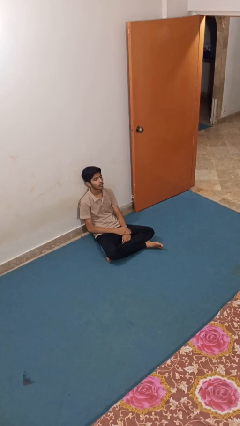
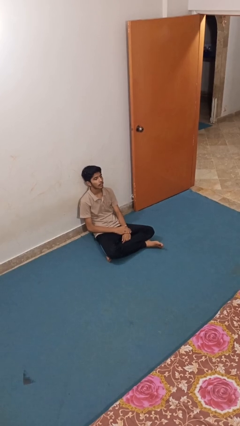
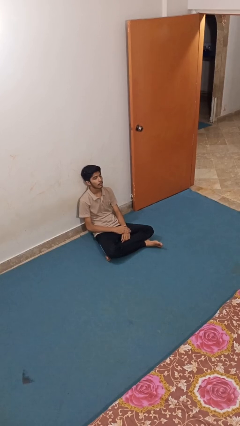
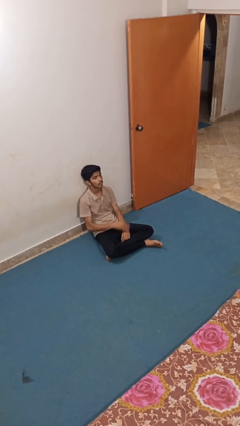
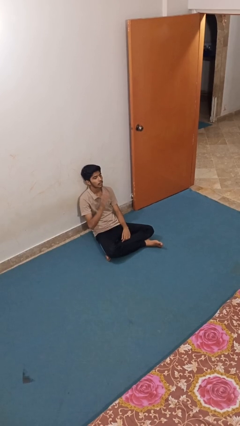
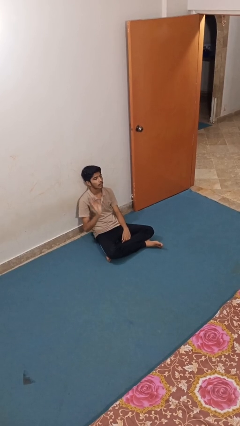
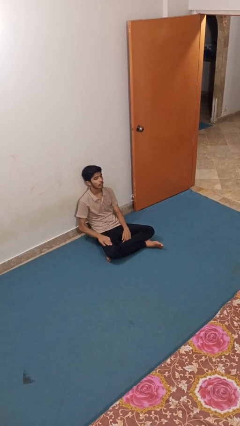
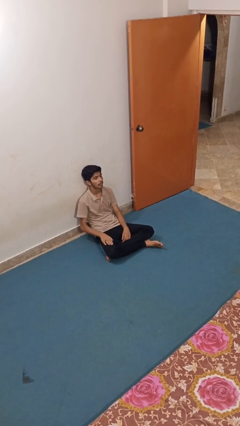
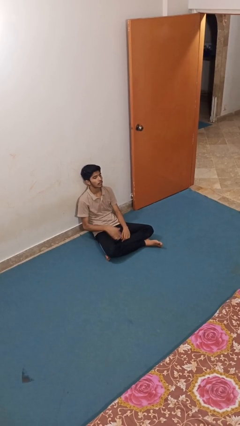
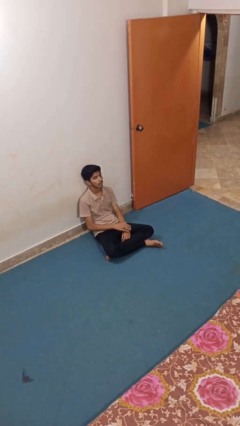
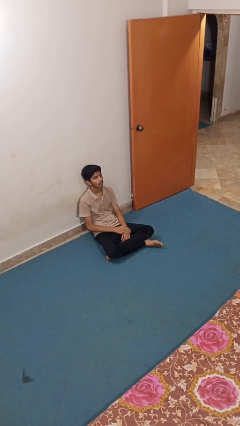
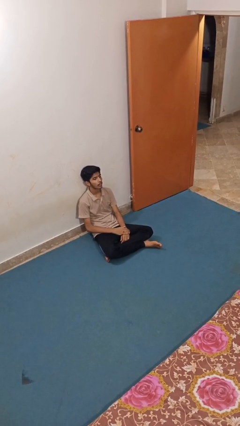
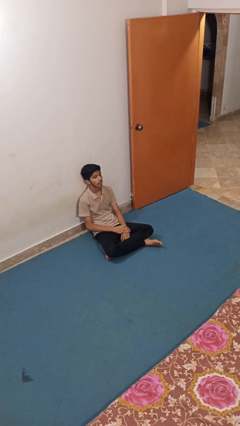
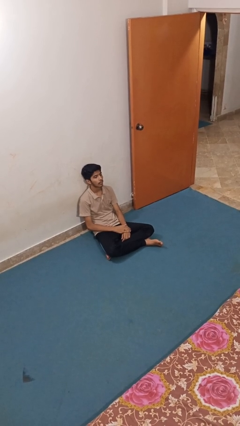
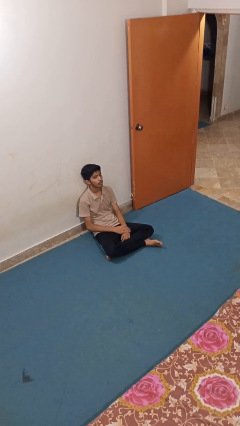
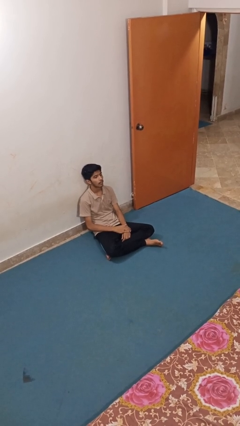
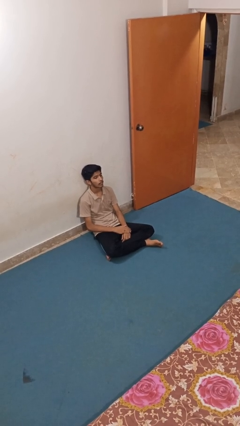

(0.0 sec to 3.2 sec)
person slaps hands on thighs

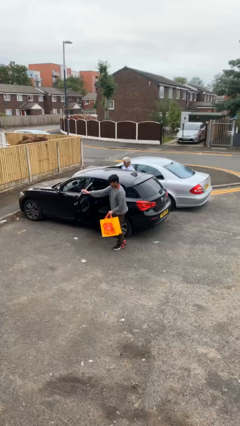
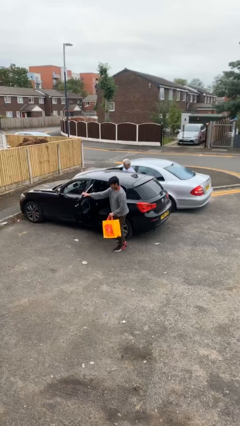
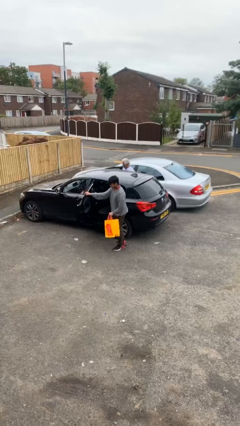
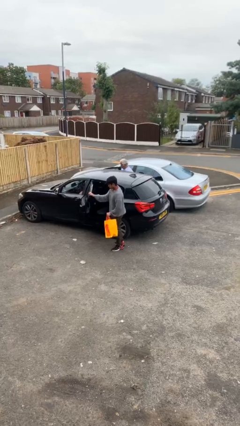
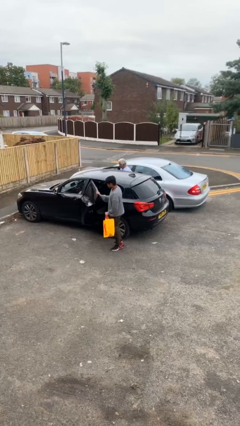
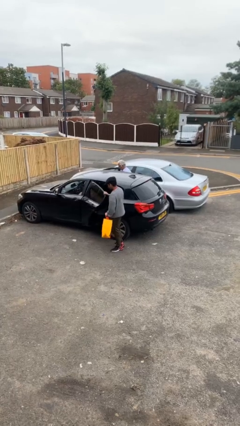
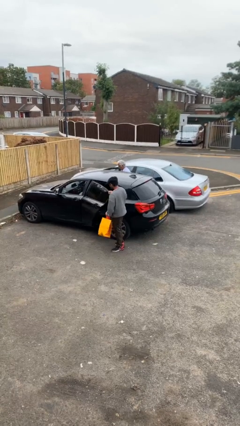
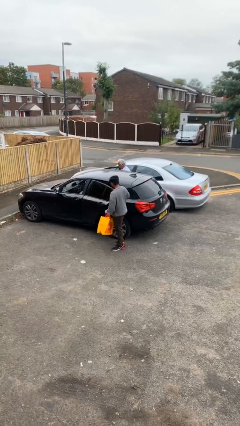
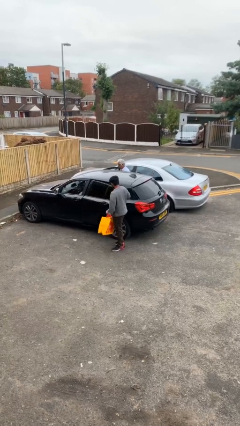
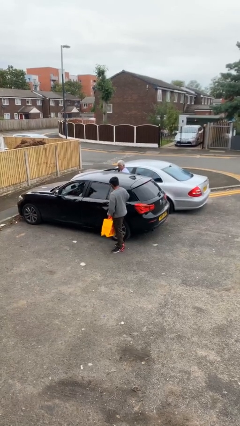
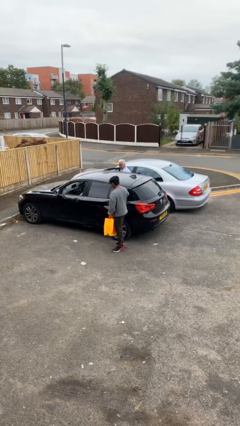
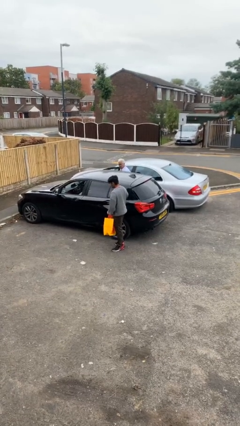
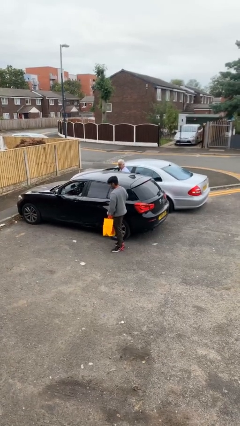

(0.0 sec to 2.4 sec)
person closes car door

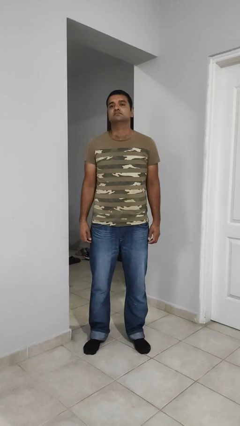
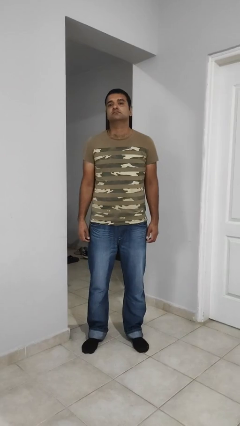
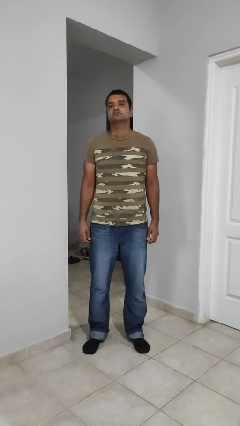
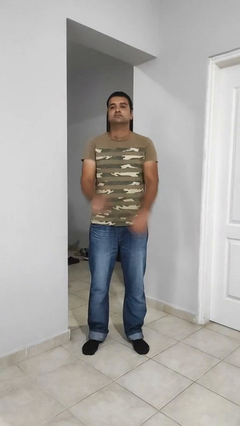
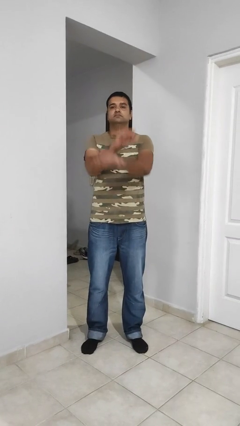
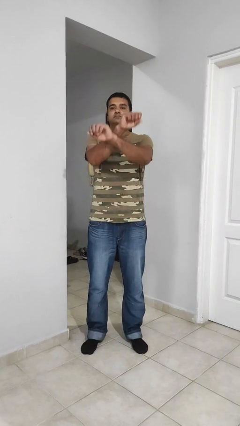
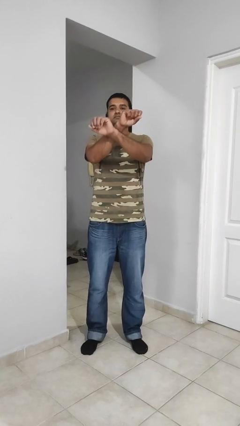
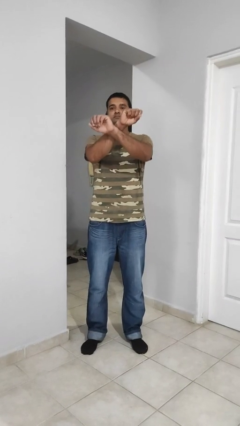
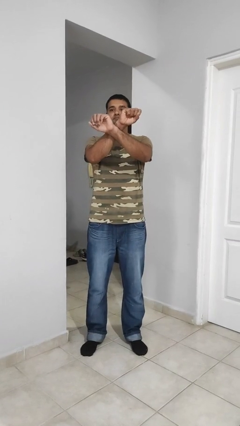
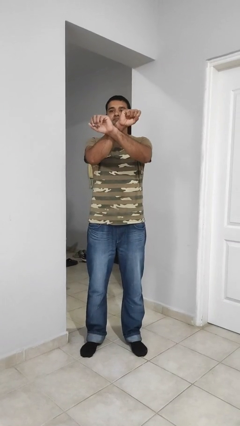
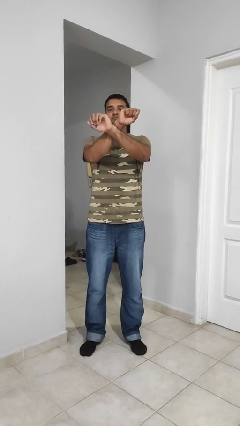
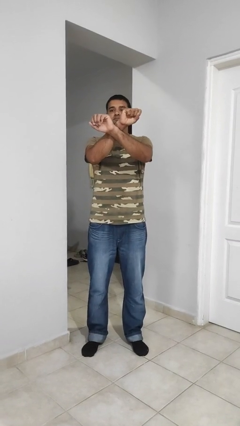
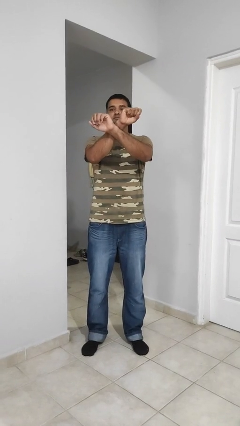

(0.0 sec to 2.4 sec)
person crosses arms

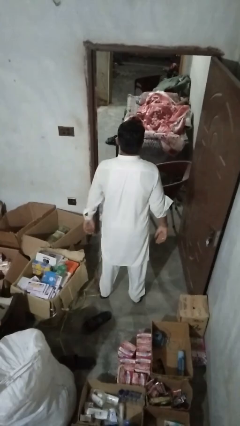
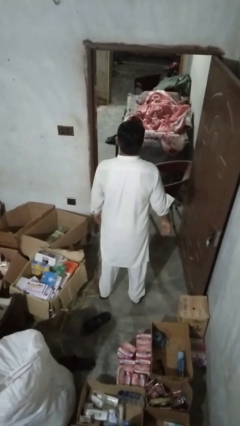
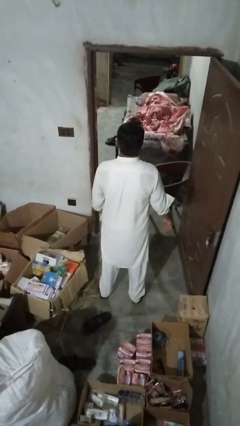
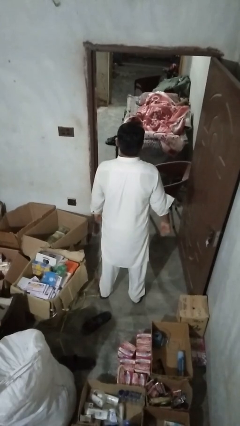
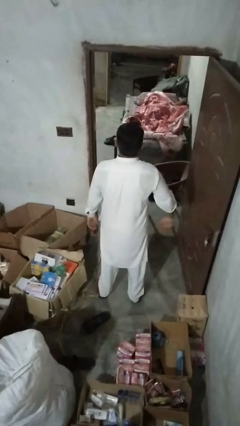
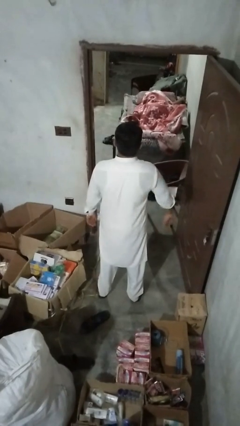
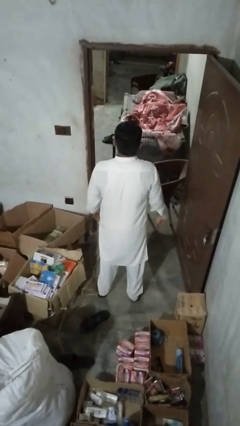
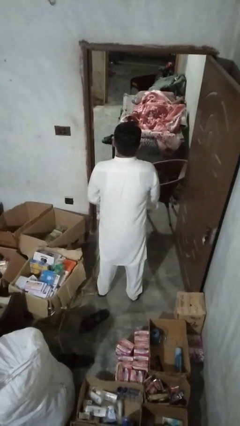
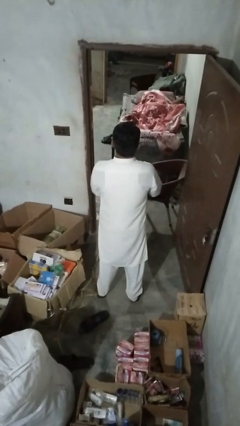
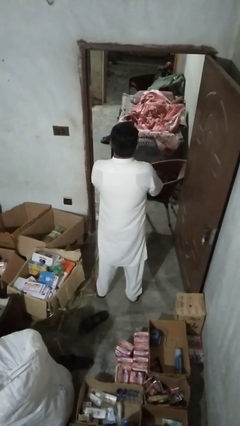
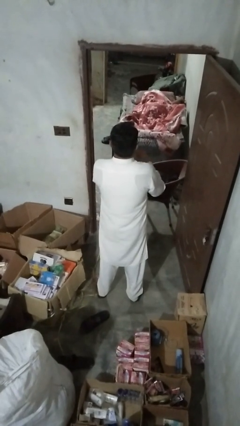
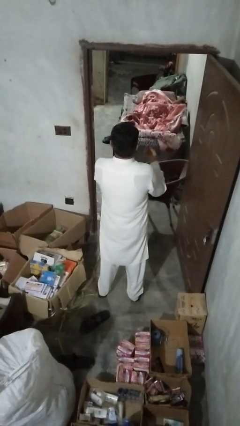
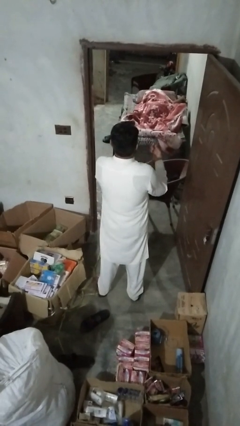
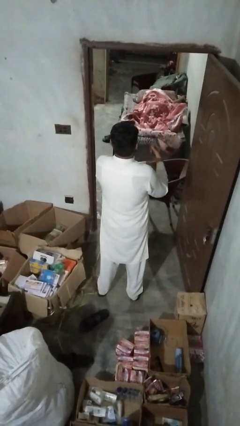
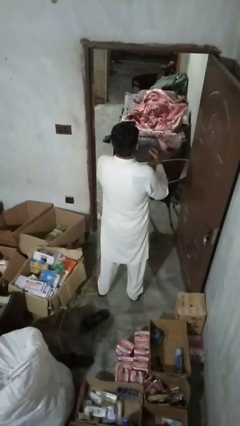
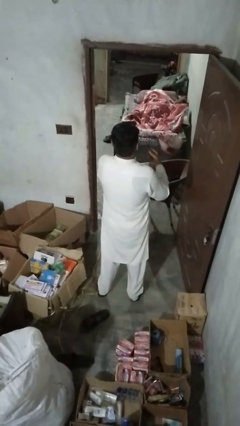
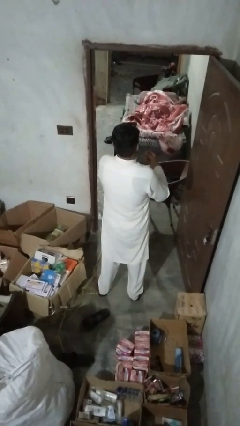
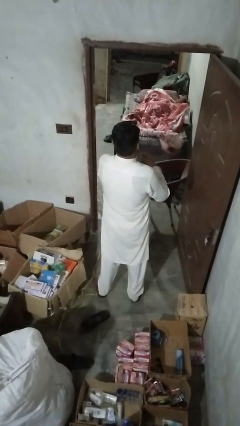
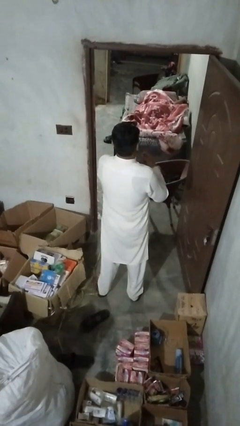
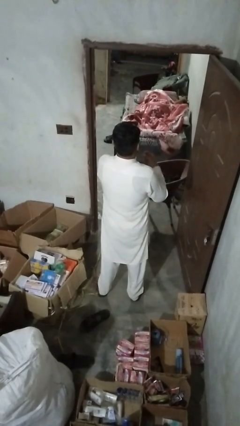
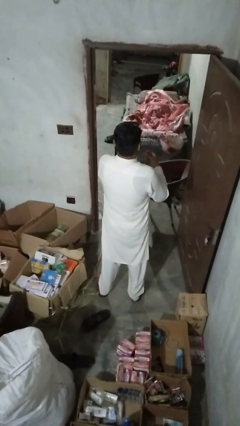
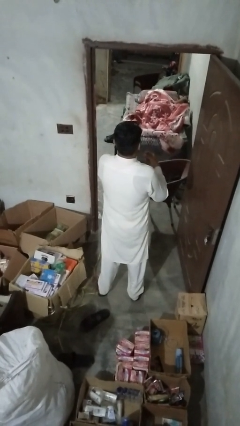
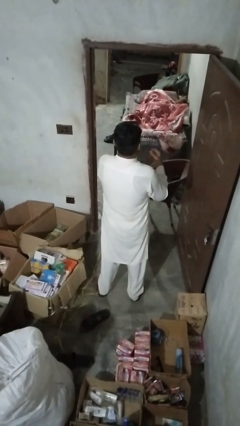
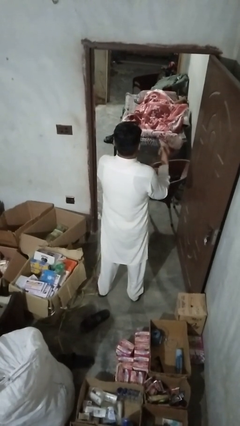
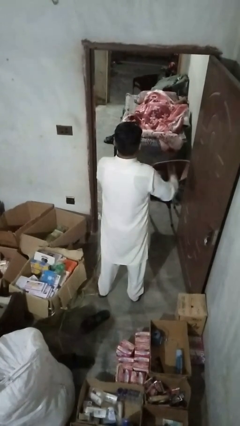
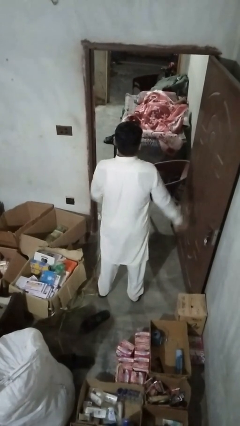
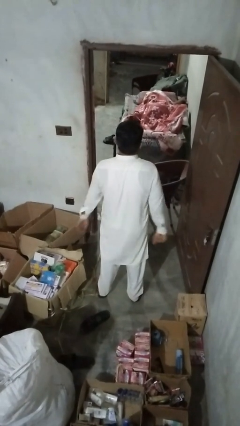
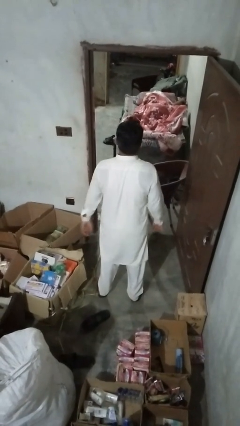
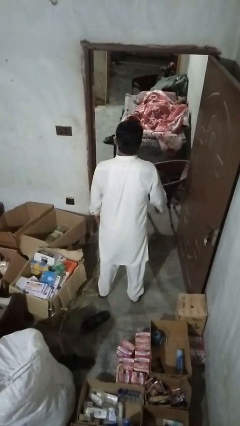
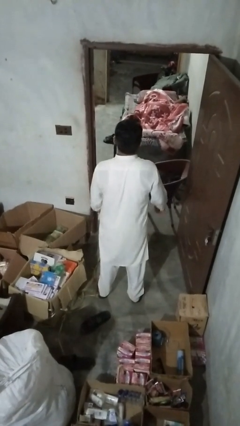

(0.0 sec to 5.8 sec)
person buttons shirt

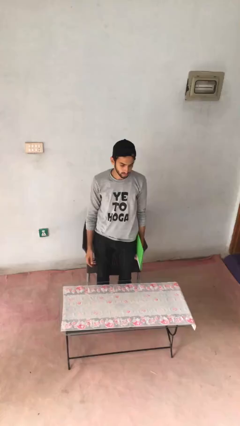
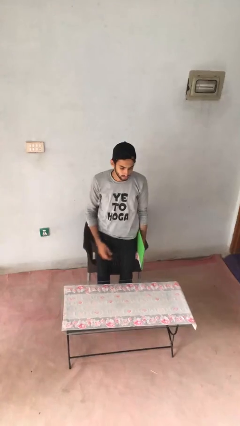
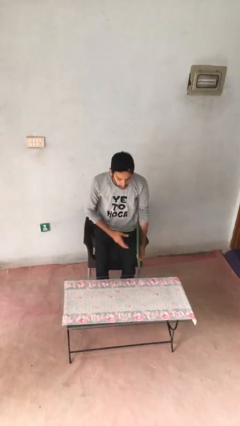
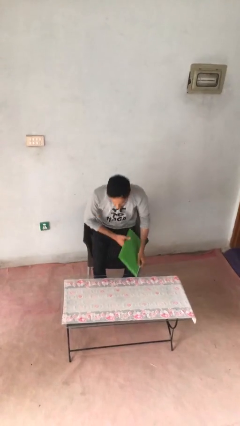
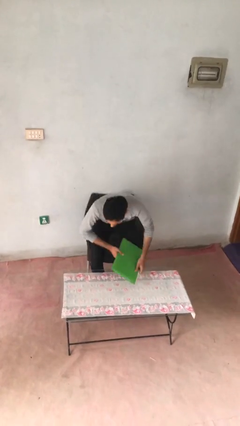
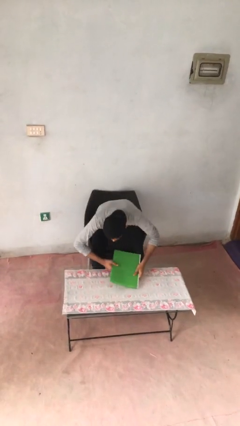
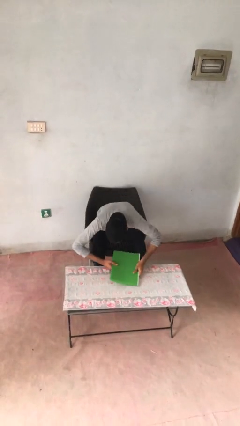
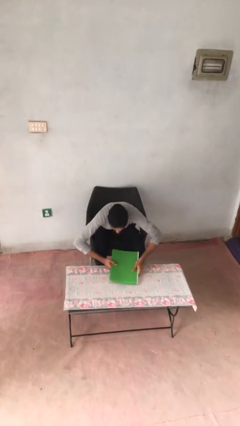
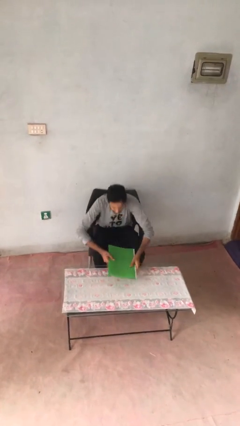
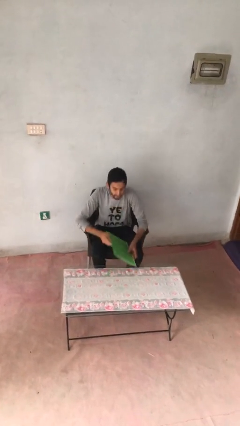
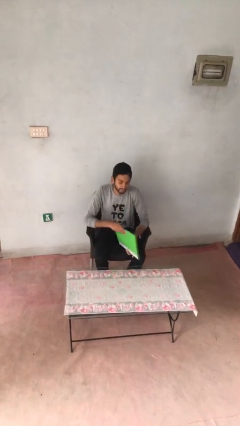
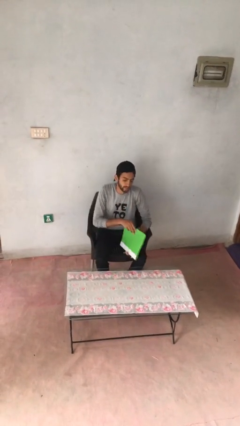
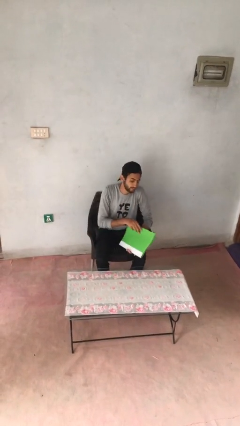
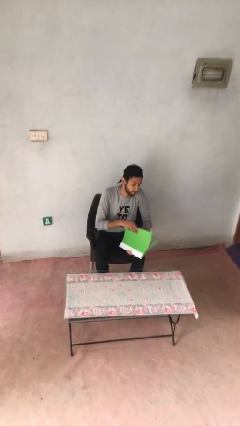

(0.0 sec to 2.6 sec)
person sits down

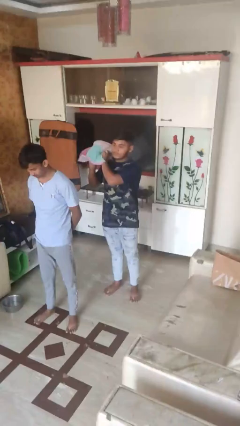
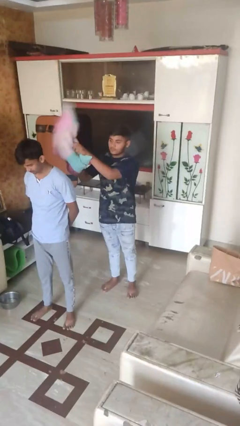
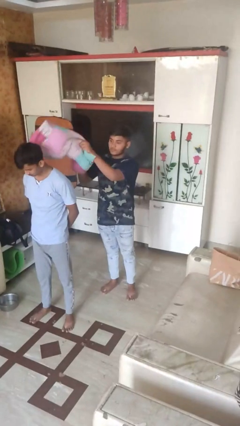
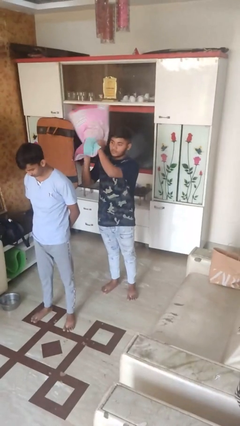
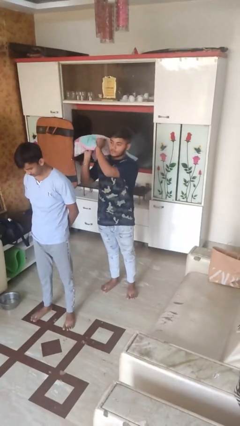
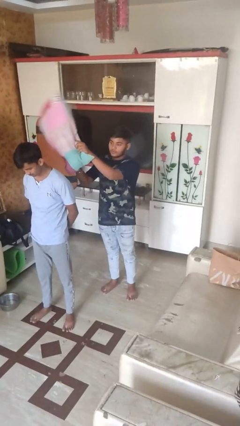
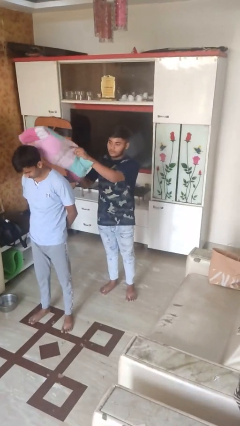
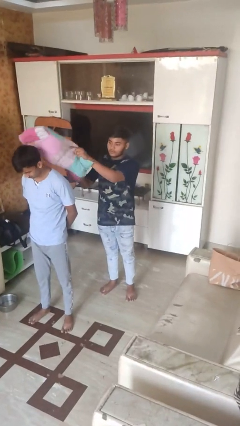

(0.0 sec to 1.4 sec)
person hits person with pillow
